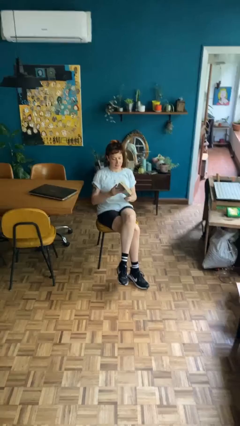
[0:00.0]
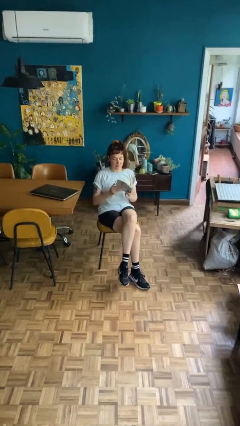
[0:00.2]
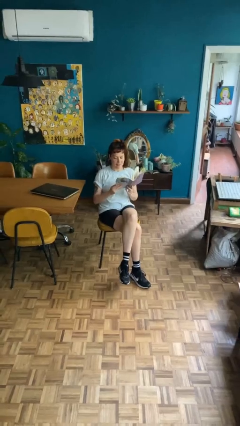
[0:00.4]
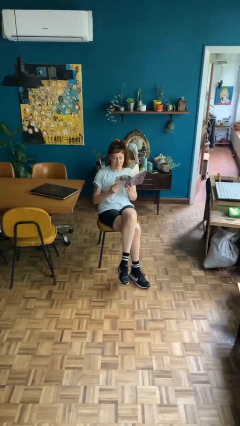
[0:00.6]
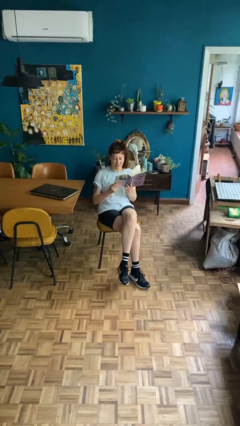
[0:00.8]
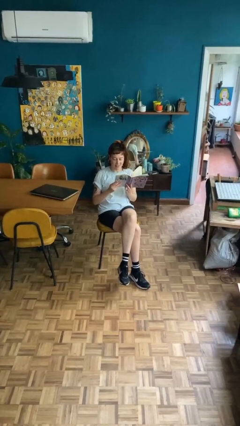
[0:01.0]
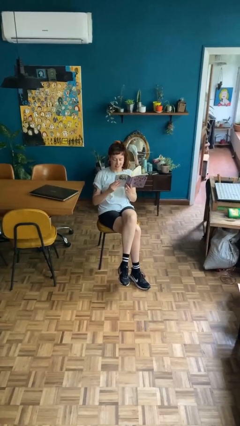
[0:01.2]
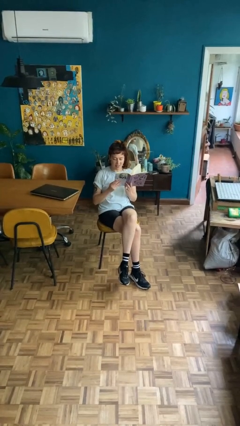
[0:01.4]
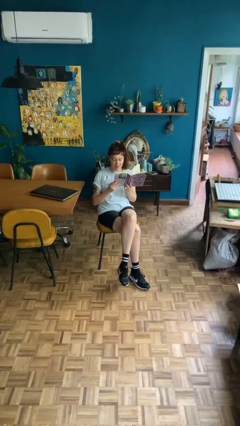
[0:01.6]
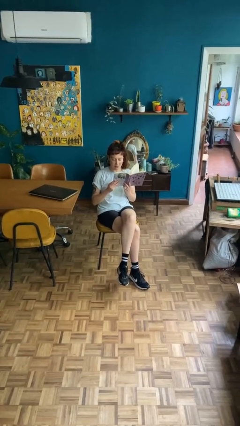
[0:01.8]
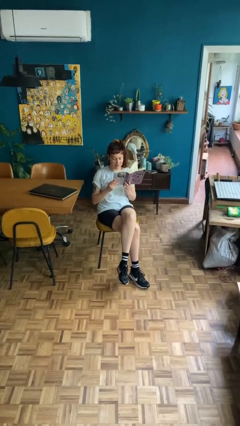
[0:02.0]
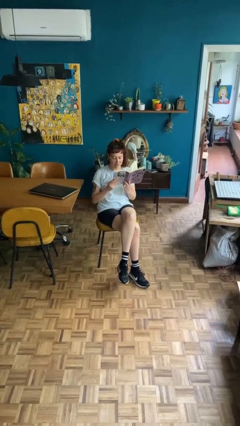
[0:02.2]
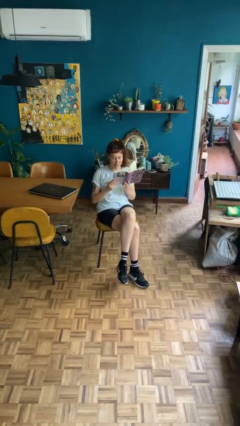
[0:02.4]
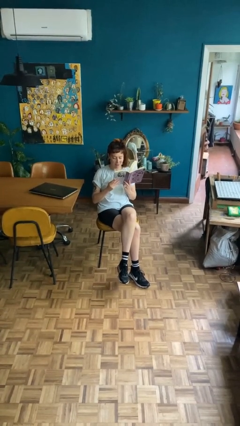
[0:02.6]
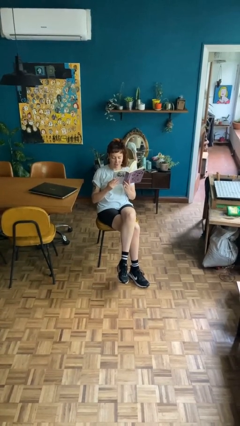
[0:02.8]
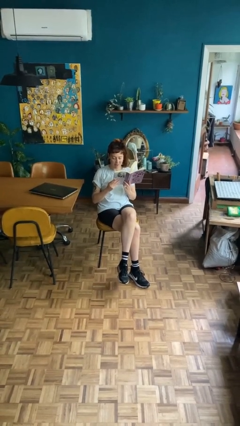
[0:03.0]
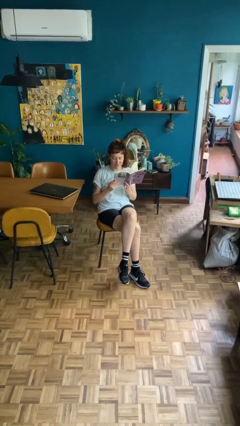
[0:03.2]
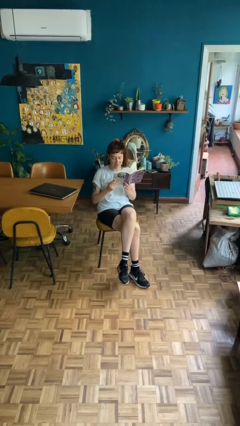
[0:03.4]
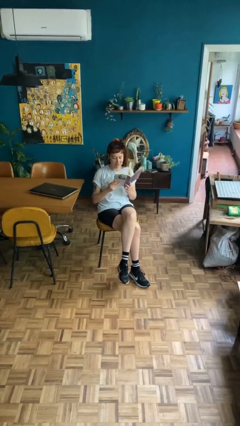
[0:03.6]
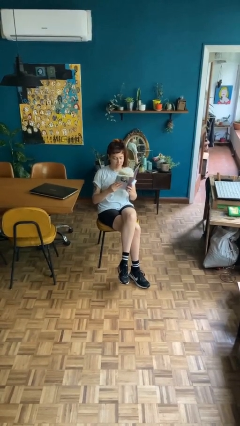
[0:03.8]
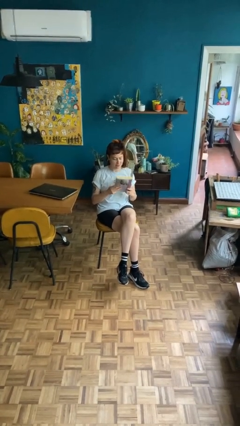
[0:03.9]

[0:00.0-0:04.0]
person reads document

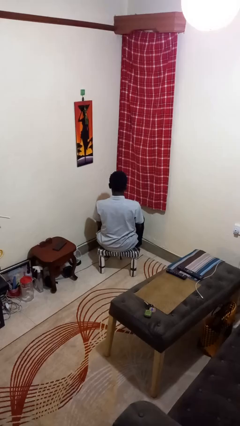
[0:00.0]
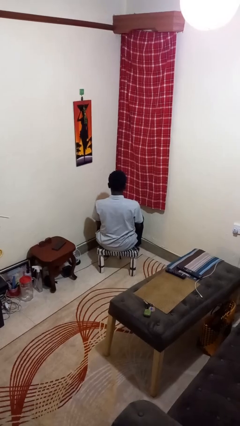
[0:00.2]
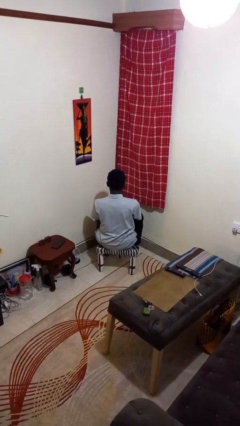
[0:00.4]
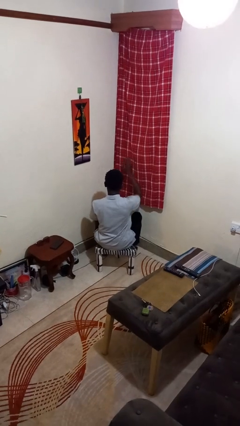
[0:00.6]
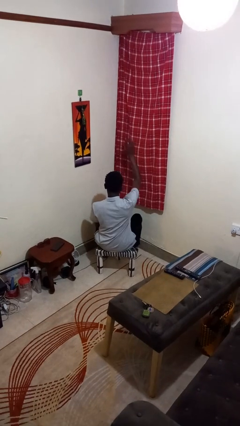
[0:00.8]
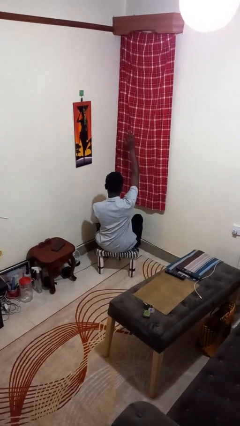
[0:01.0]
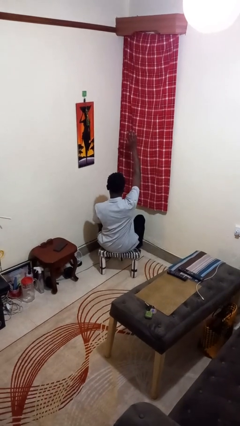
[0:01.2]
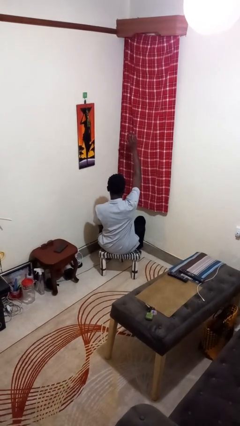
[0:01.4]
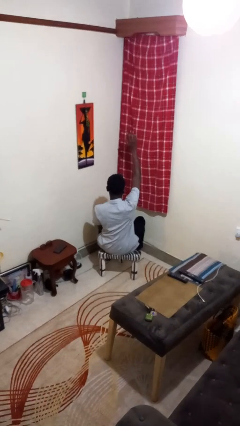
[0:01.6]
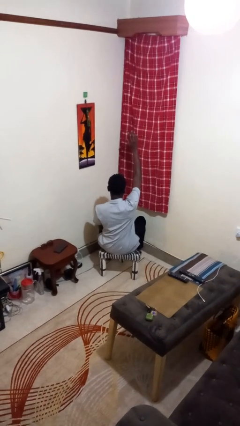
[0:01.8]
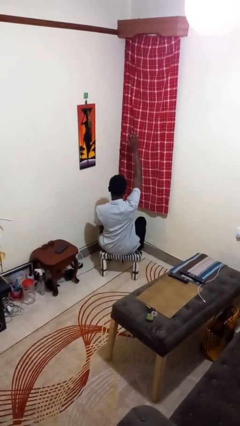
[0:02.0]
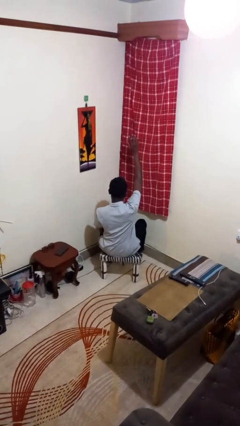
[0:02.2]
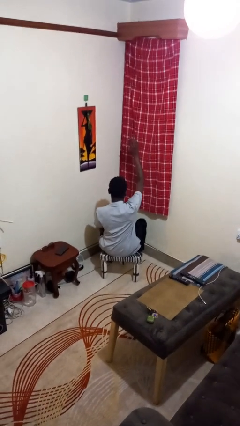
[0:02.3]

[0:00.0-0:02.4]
person gestures raise hand

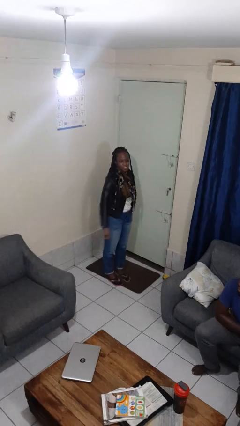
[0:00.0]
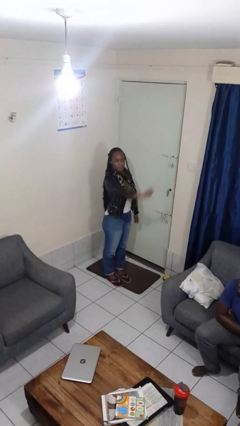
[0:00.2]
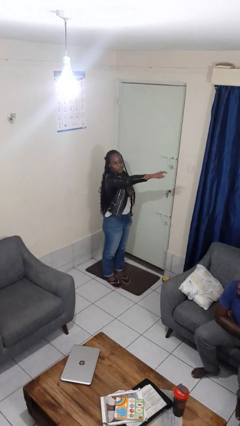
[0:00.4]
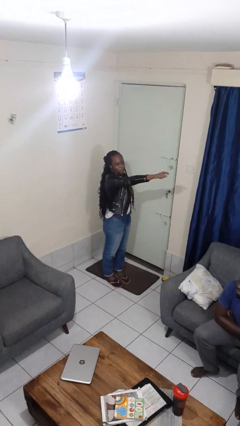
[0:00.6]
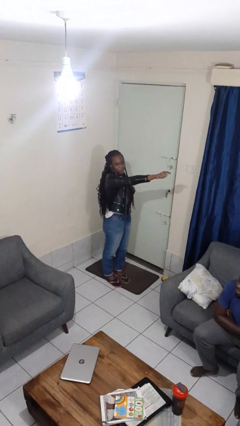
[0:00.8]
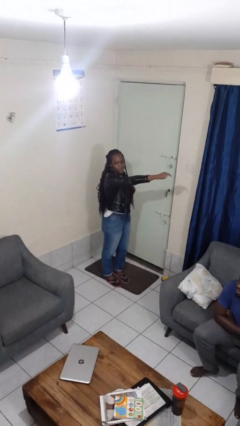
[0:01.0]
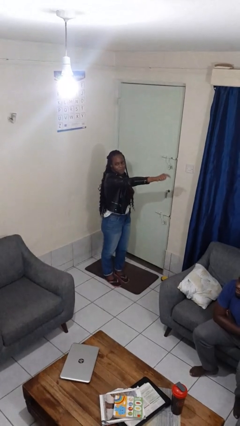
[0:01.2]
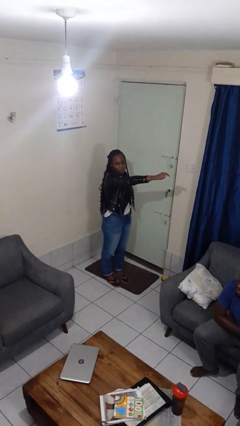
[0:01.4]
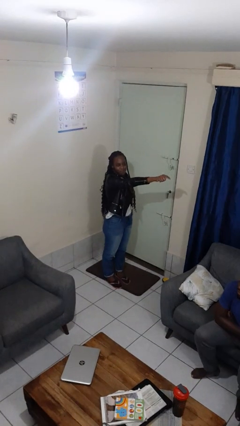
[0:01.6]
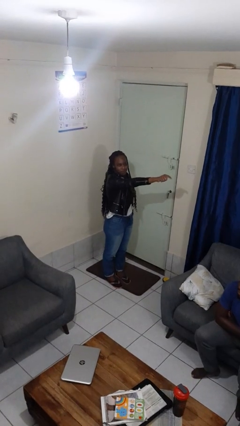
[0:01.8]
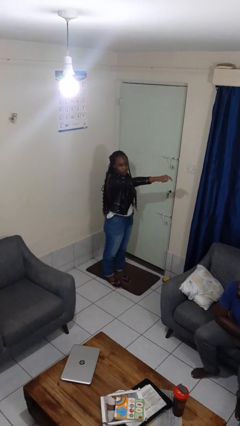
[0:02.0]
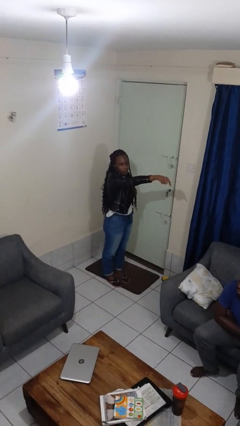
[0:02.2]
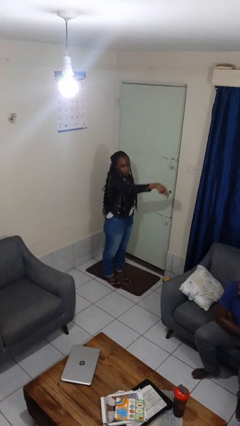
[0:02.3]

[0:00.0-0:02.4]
person points at person

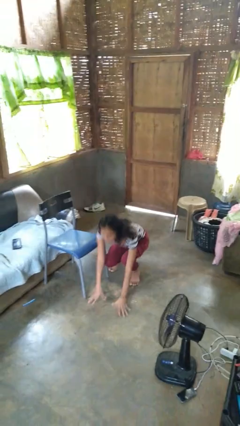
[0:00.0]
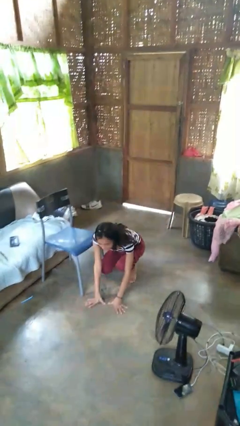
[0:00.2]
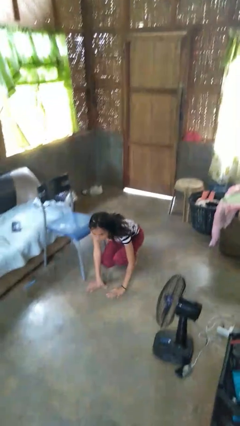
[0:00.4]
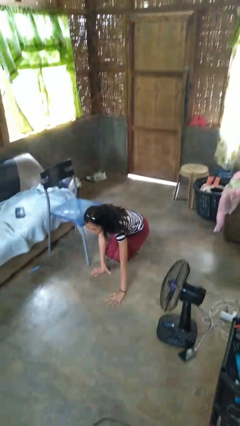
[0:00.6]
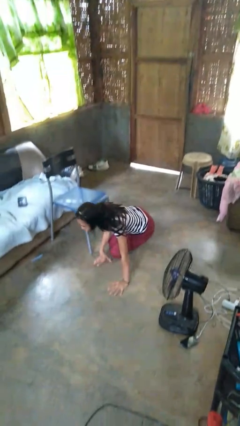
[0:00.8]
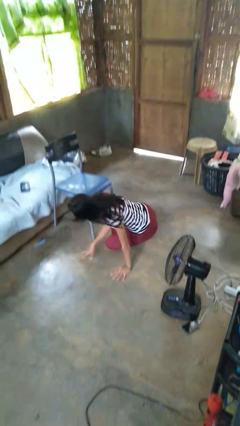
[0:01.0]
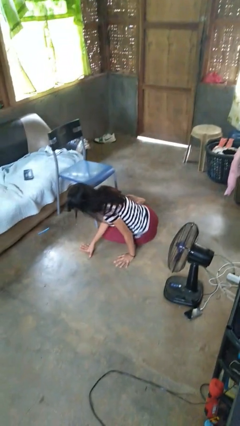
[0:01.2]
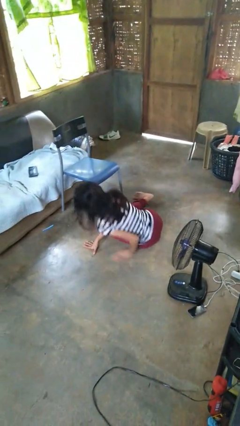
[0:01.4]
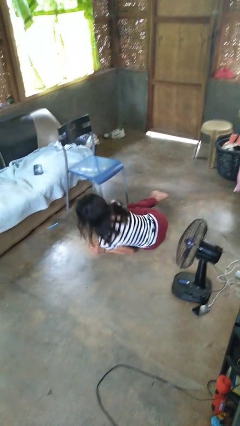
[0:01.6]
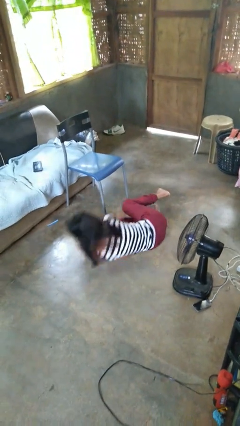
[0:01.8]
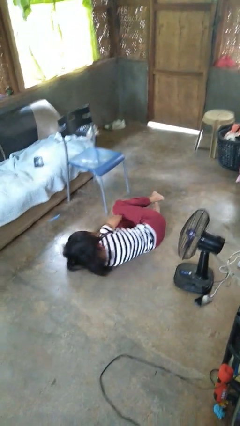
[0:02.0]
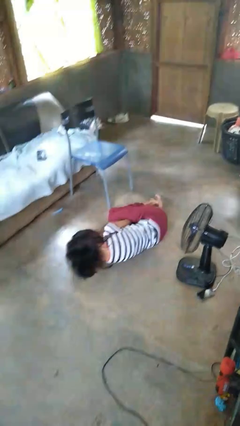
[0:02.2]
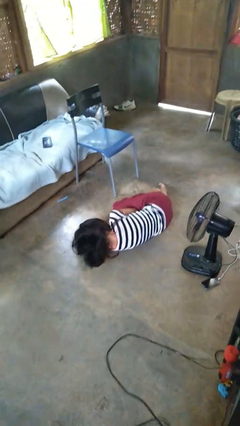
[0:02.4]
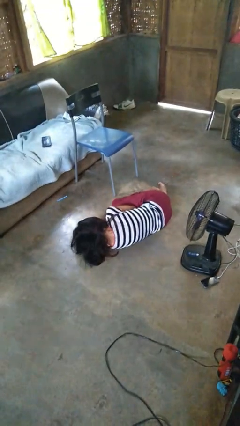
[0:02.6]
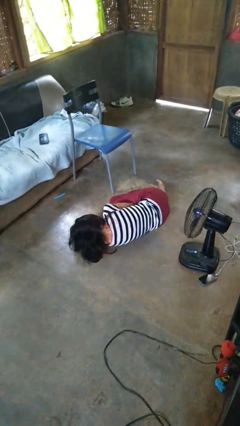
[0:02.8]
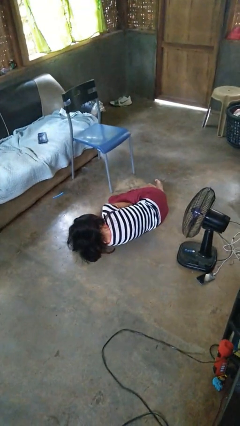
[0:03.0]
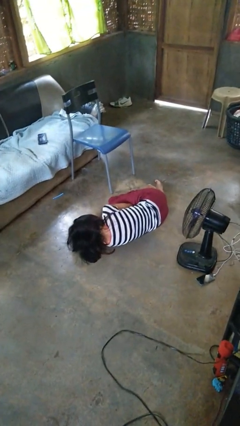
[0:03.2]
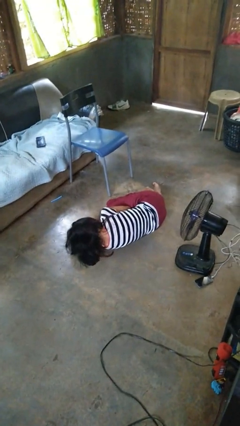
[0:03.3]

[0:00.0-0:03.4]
person lies down on floor

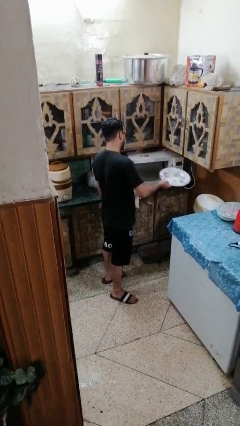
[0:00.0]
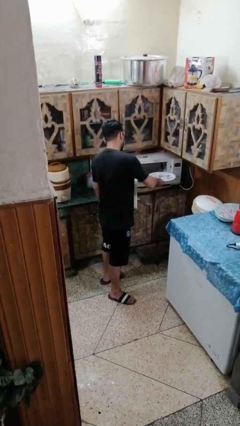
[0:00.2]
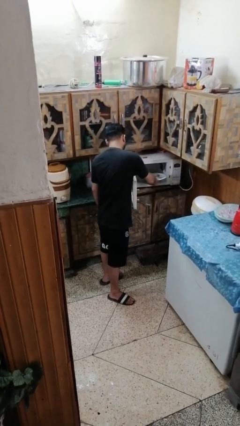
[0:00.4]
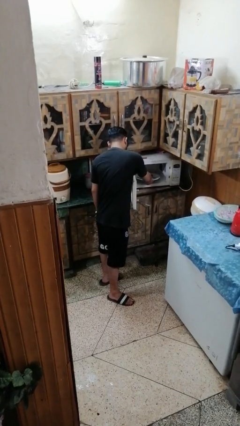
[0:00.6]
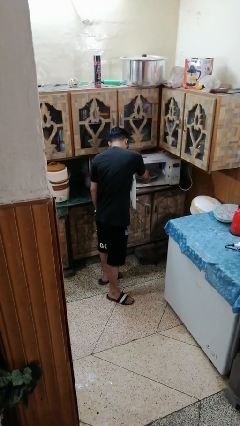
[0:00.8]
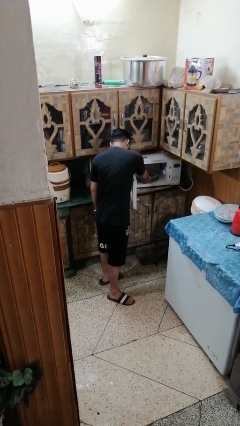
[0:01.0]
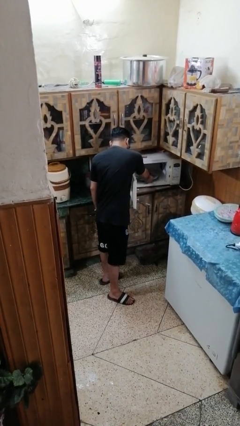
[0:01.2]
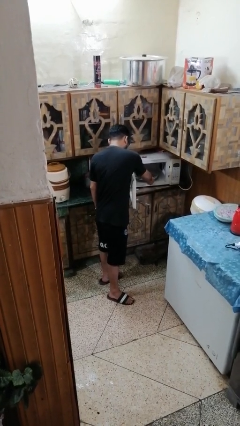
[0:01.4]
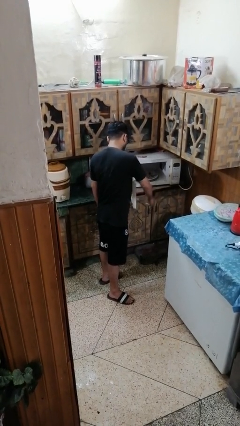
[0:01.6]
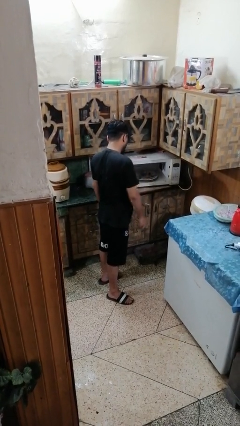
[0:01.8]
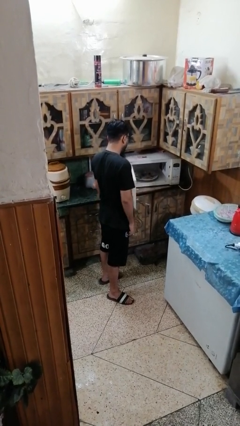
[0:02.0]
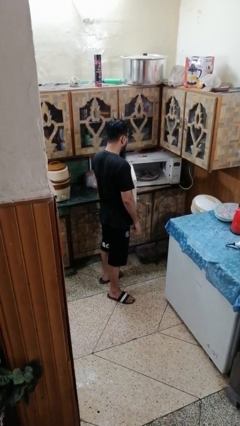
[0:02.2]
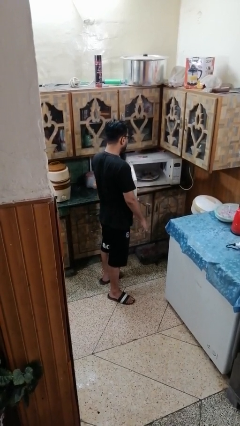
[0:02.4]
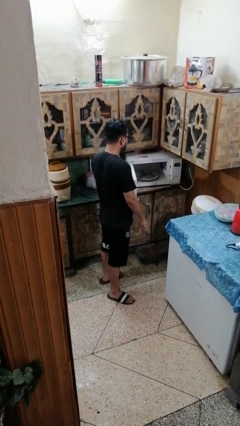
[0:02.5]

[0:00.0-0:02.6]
person puts object into microwave

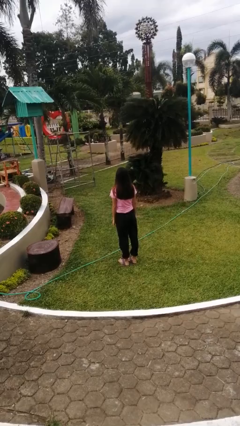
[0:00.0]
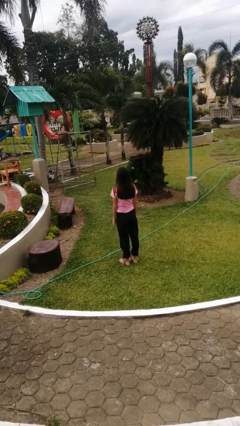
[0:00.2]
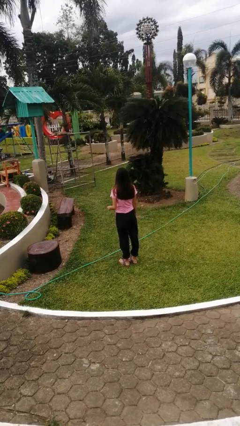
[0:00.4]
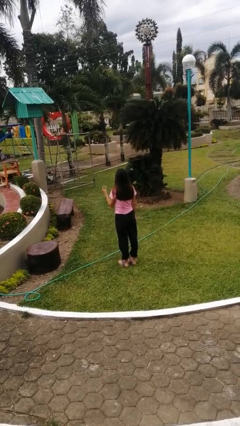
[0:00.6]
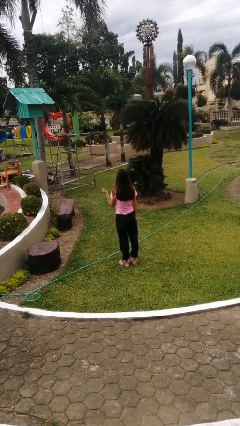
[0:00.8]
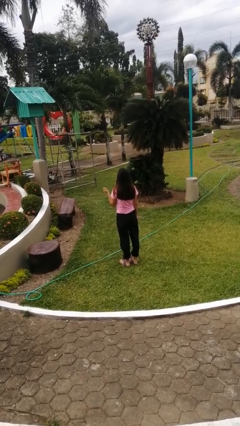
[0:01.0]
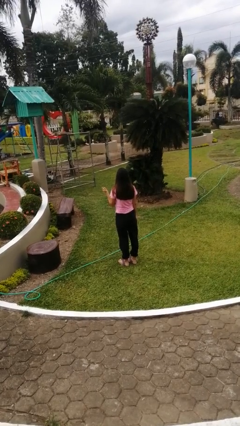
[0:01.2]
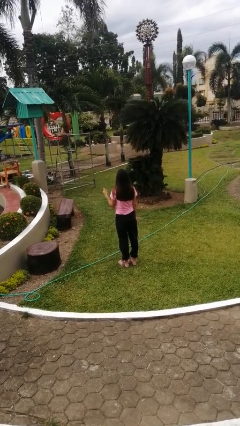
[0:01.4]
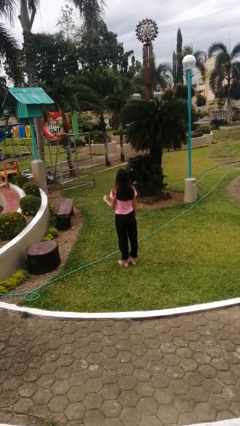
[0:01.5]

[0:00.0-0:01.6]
person snaps fingers

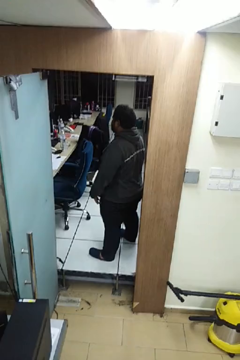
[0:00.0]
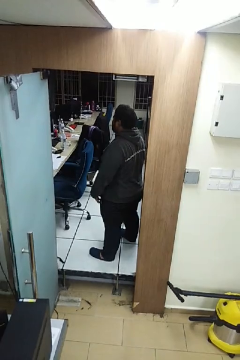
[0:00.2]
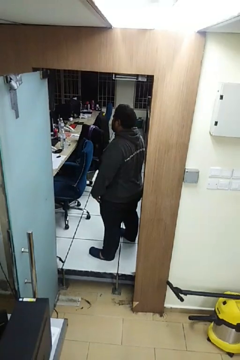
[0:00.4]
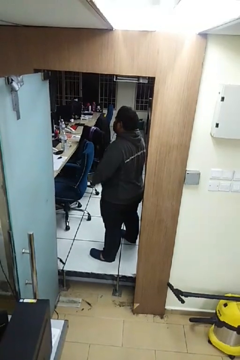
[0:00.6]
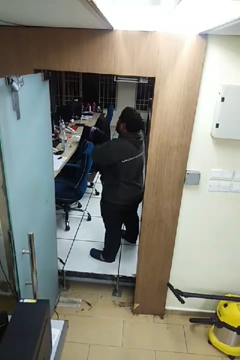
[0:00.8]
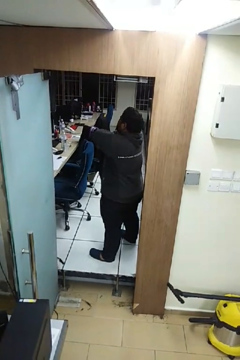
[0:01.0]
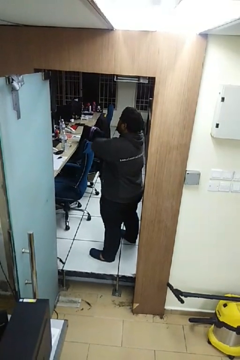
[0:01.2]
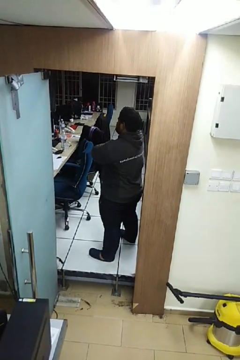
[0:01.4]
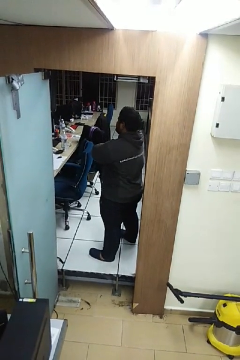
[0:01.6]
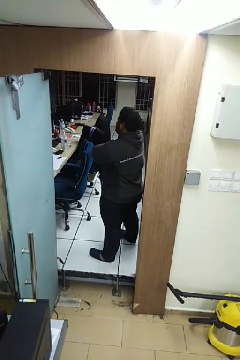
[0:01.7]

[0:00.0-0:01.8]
person crosses arms
